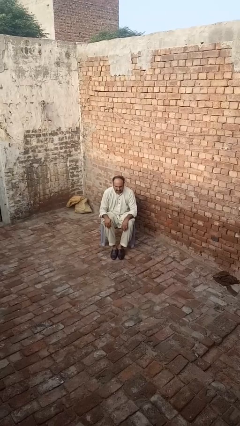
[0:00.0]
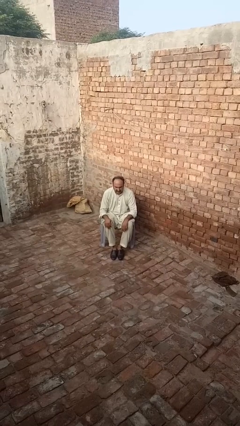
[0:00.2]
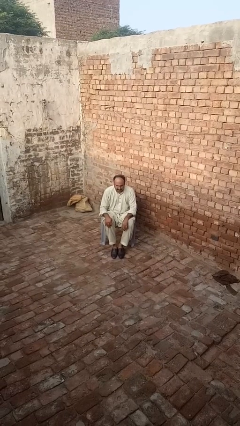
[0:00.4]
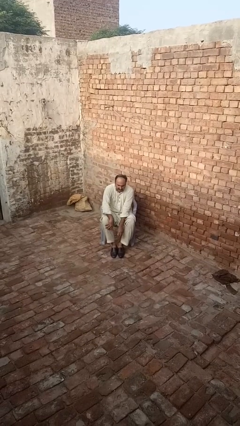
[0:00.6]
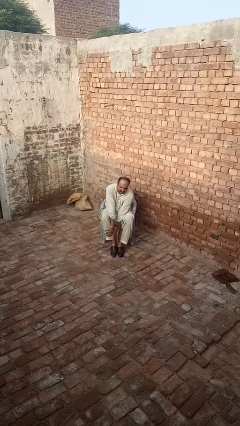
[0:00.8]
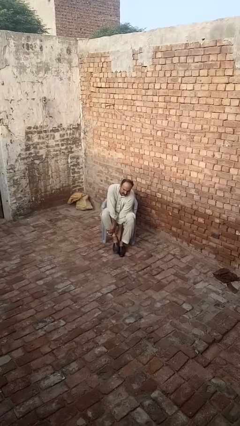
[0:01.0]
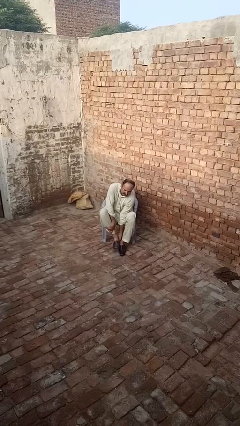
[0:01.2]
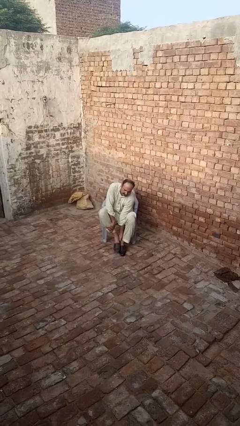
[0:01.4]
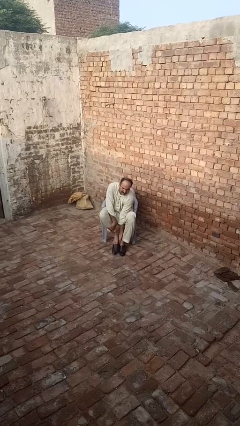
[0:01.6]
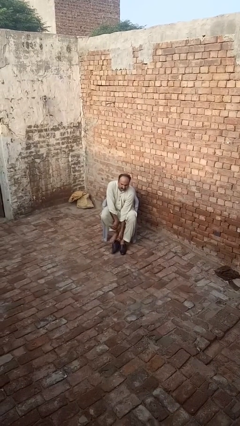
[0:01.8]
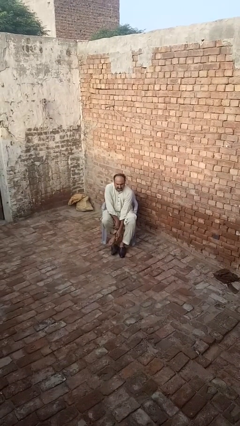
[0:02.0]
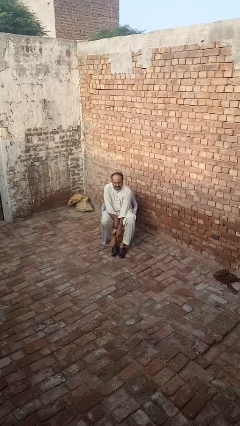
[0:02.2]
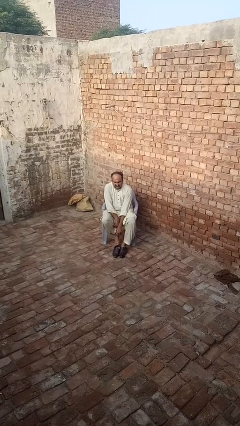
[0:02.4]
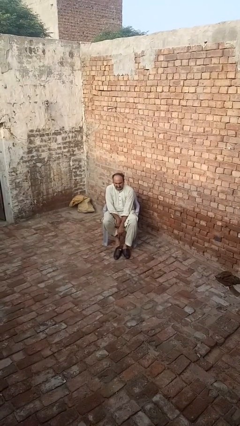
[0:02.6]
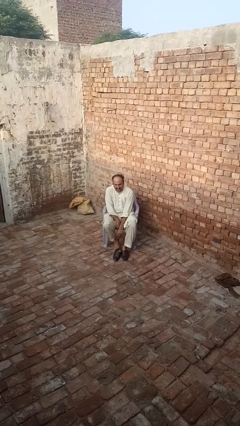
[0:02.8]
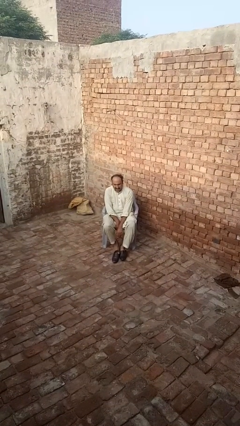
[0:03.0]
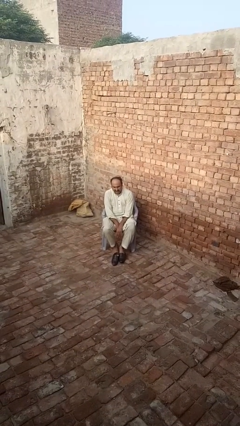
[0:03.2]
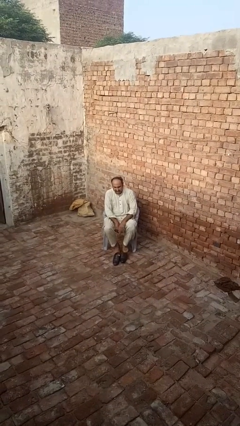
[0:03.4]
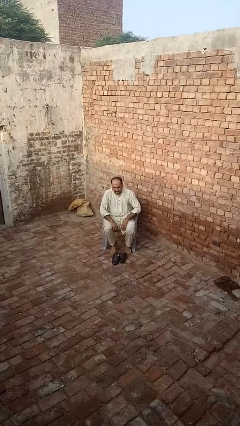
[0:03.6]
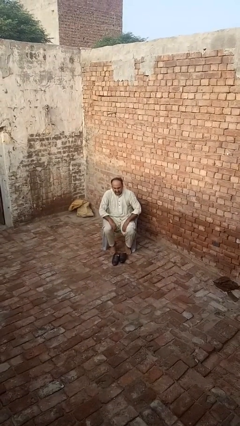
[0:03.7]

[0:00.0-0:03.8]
person takes off shoes

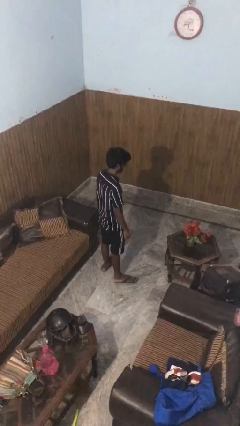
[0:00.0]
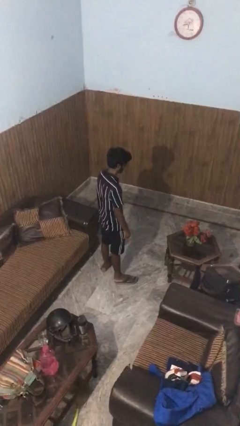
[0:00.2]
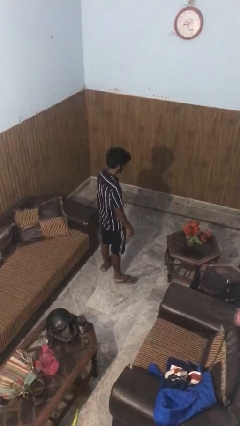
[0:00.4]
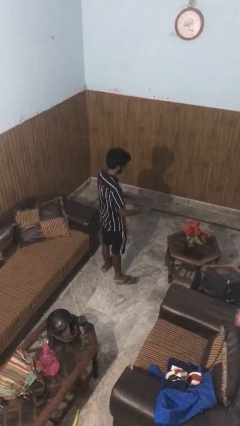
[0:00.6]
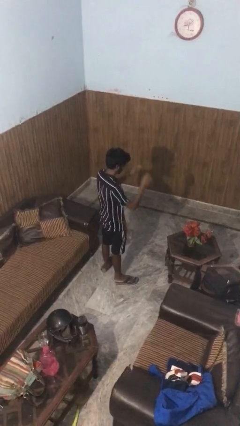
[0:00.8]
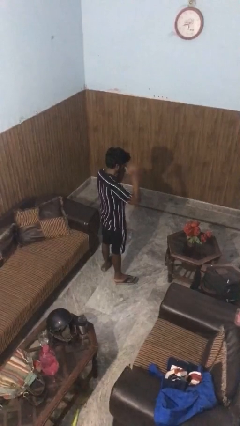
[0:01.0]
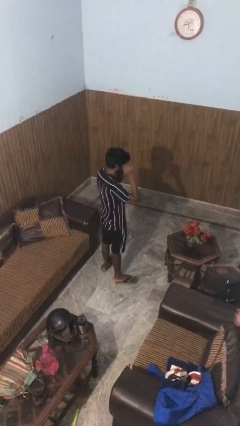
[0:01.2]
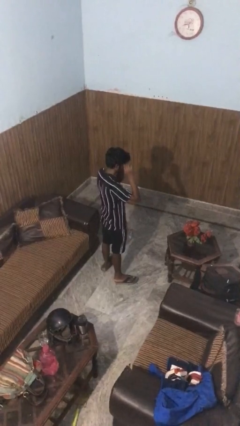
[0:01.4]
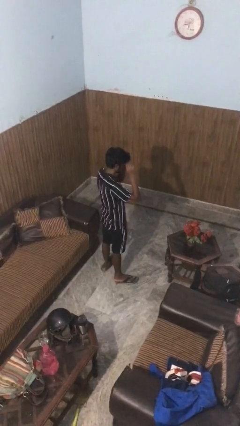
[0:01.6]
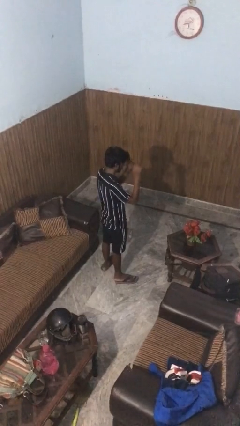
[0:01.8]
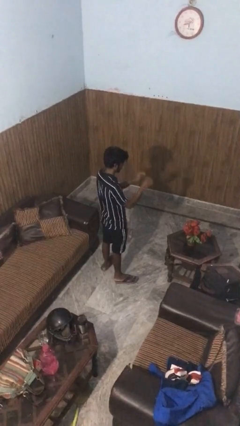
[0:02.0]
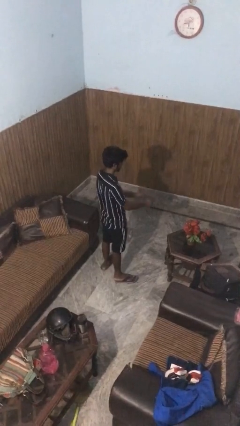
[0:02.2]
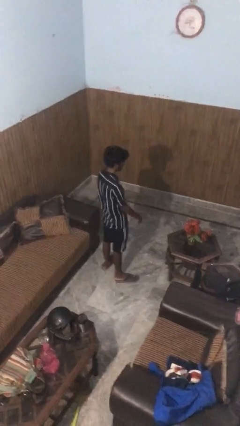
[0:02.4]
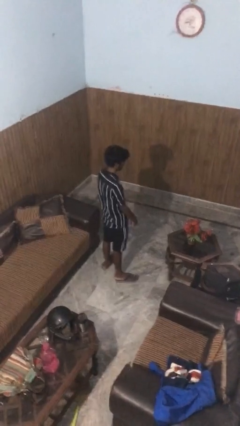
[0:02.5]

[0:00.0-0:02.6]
person takes off glasses

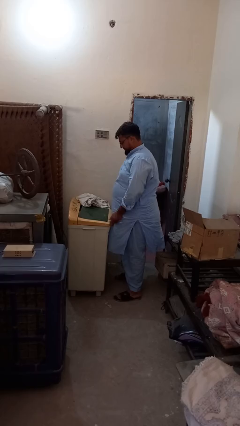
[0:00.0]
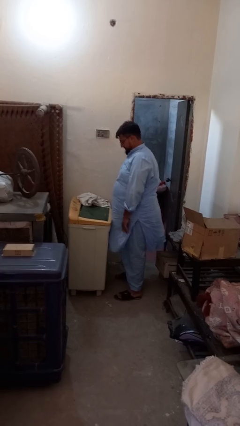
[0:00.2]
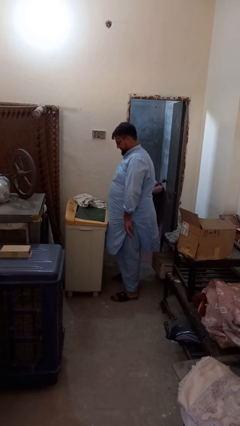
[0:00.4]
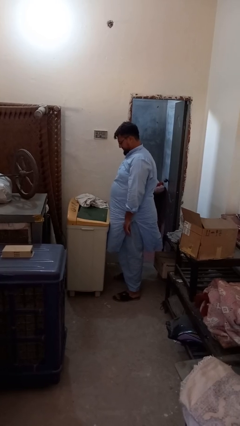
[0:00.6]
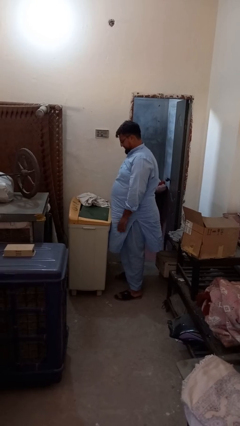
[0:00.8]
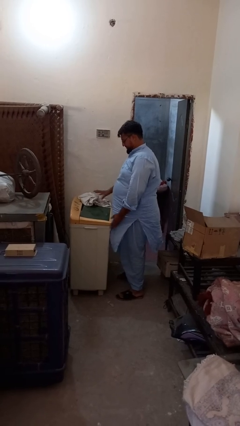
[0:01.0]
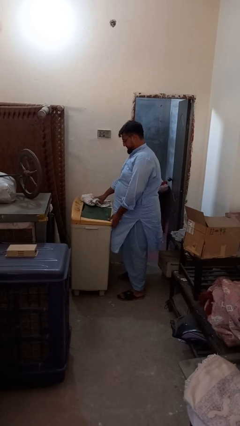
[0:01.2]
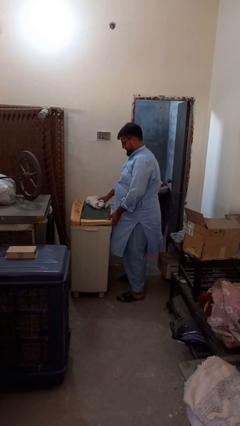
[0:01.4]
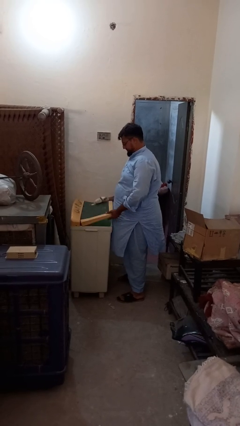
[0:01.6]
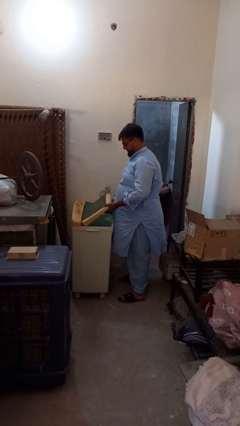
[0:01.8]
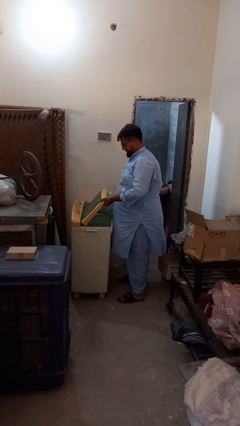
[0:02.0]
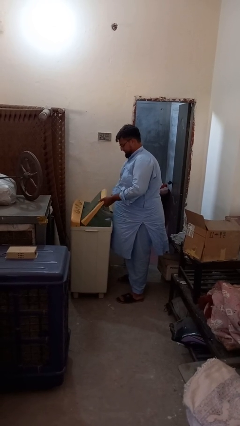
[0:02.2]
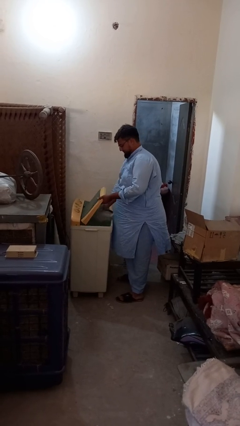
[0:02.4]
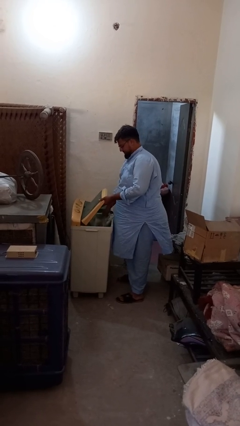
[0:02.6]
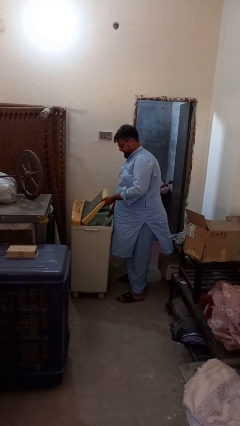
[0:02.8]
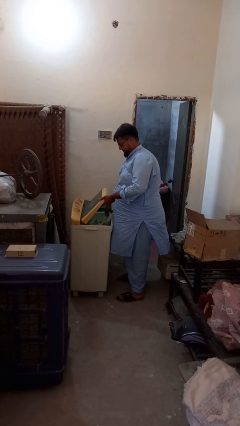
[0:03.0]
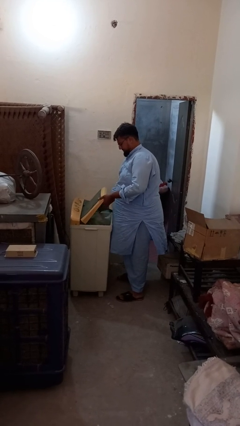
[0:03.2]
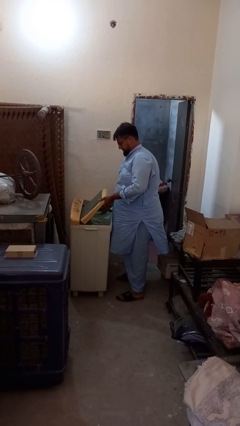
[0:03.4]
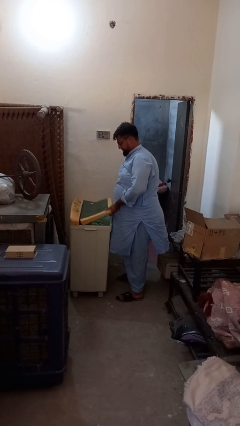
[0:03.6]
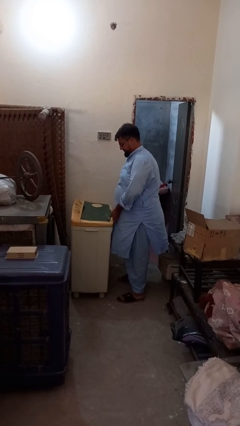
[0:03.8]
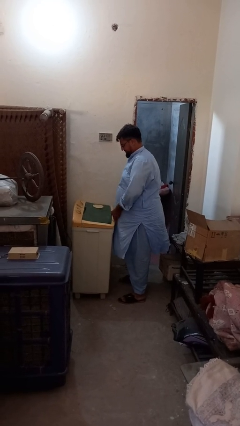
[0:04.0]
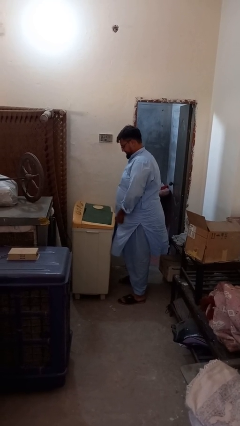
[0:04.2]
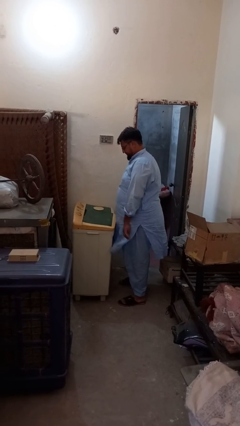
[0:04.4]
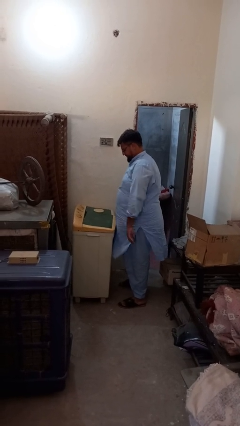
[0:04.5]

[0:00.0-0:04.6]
person loads clotheswasher

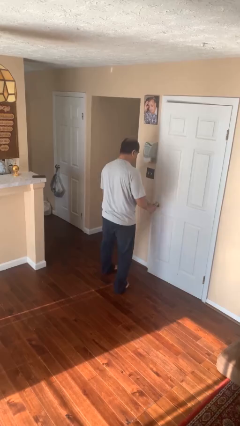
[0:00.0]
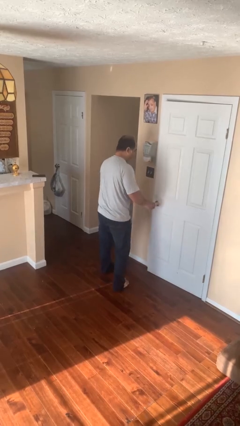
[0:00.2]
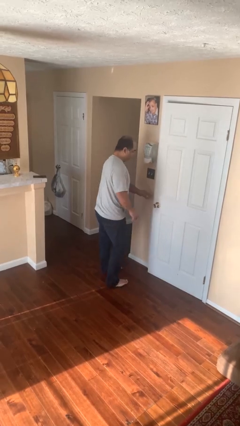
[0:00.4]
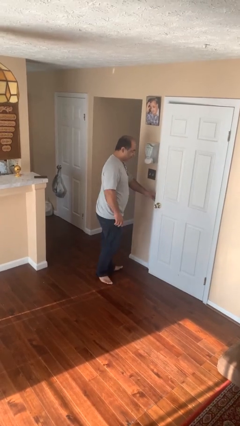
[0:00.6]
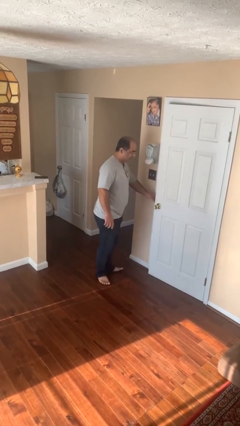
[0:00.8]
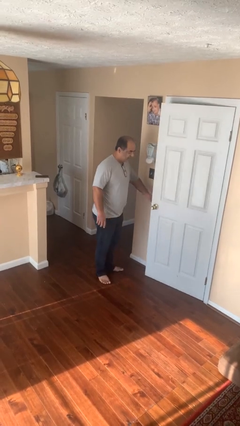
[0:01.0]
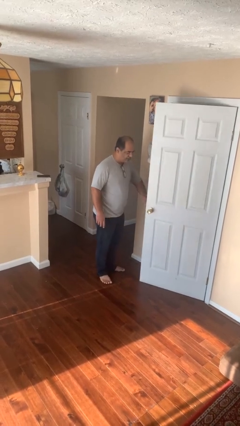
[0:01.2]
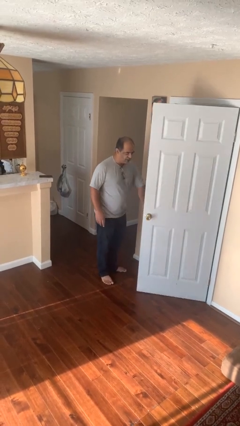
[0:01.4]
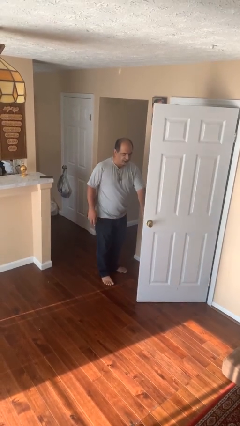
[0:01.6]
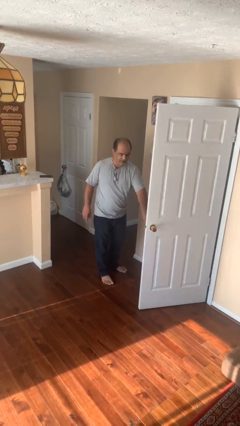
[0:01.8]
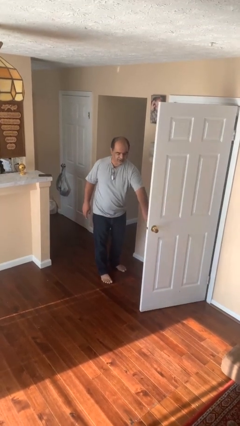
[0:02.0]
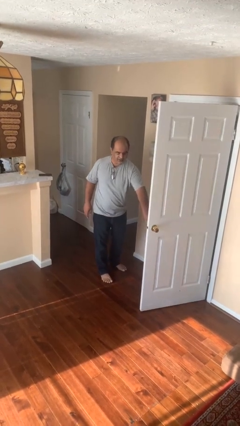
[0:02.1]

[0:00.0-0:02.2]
person opens facility door

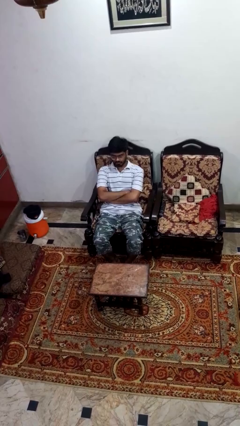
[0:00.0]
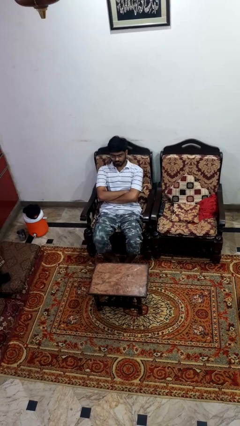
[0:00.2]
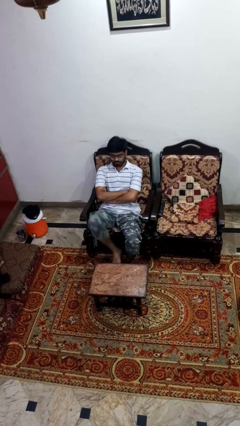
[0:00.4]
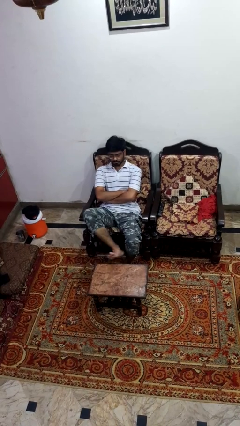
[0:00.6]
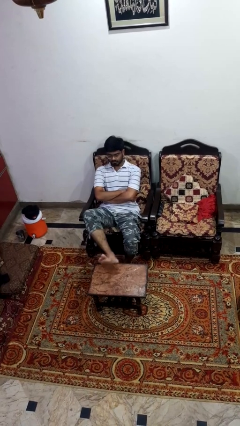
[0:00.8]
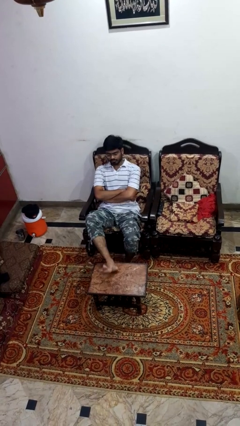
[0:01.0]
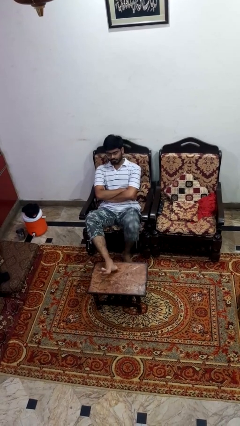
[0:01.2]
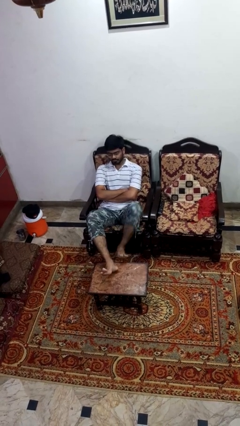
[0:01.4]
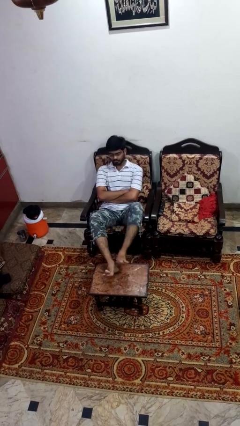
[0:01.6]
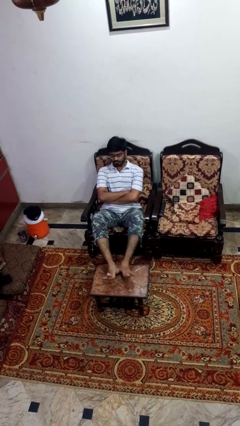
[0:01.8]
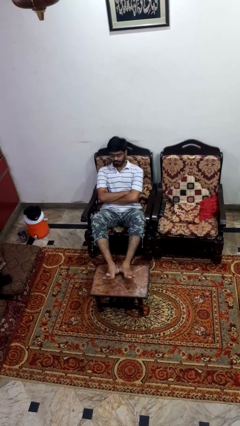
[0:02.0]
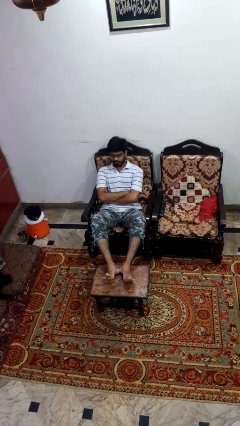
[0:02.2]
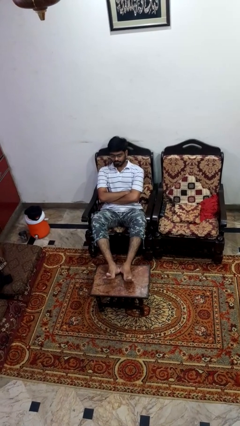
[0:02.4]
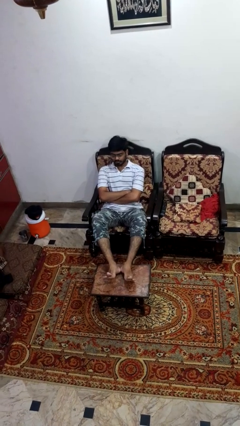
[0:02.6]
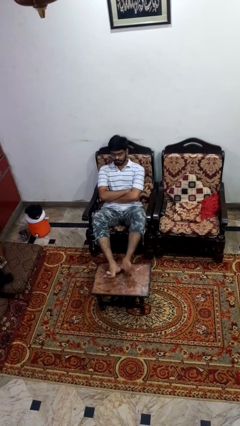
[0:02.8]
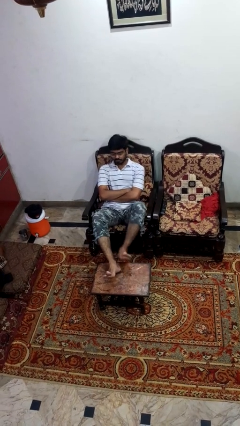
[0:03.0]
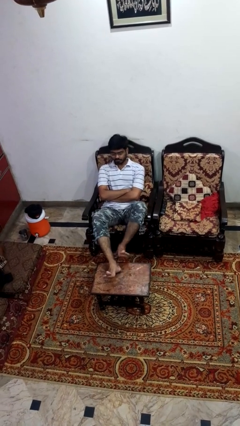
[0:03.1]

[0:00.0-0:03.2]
person puts feet up

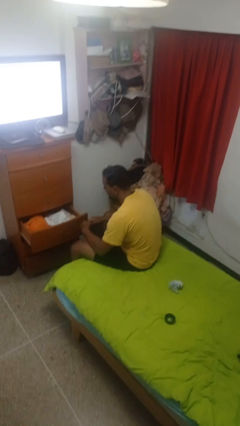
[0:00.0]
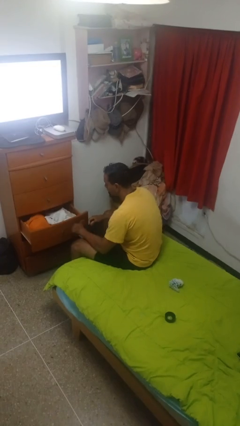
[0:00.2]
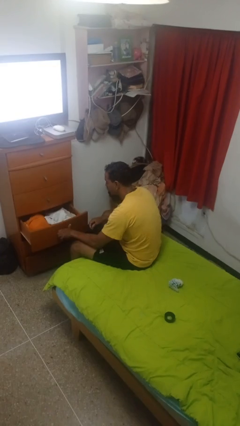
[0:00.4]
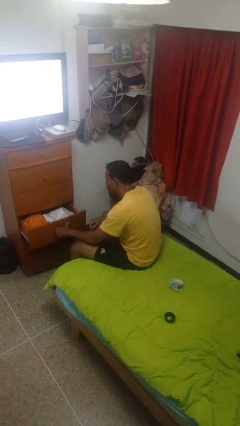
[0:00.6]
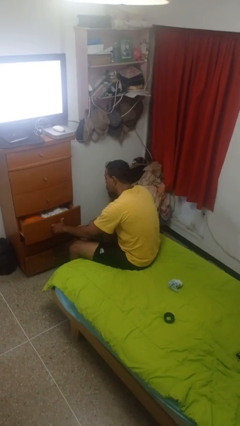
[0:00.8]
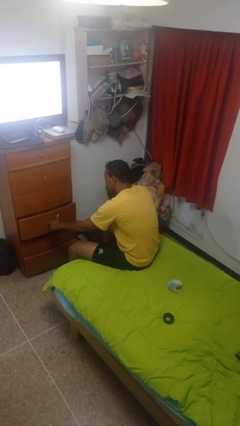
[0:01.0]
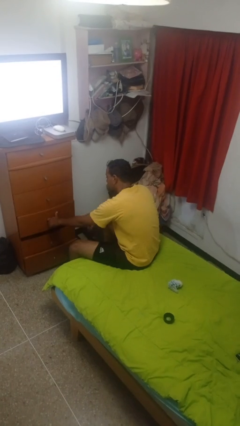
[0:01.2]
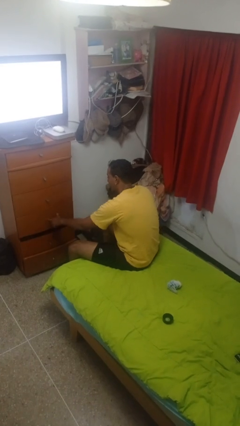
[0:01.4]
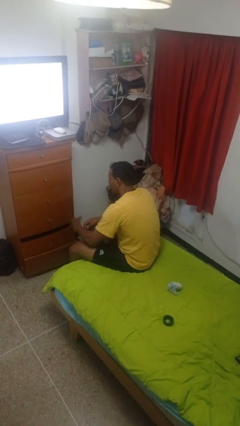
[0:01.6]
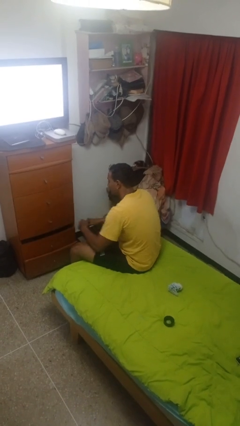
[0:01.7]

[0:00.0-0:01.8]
person closes dresser drawer
